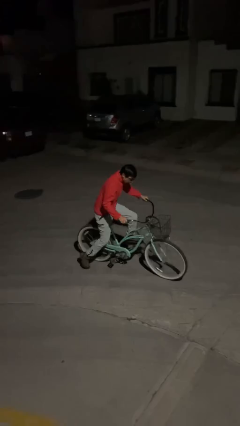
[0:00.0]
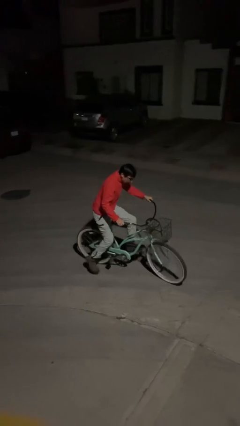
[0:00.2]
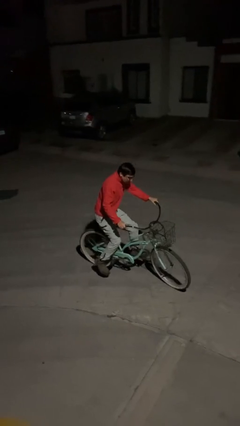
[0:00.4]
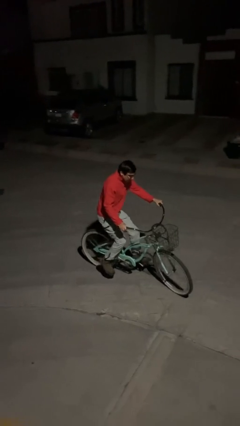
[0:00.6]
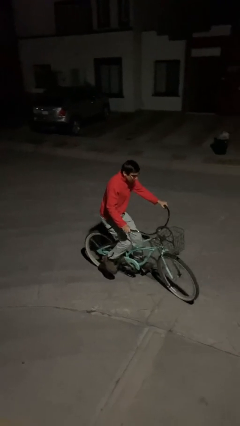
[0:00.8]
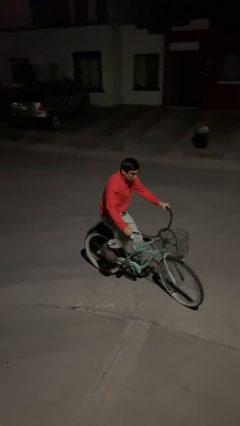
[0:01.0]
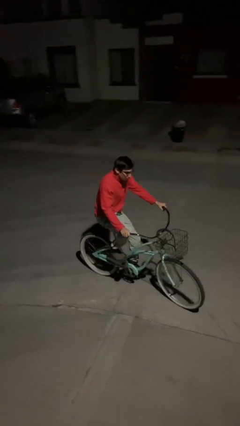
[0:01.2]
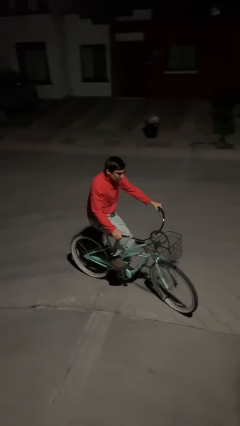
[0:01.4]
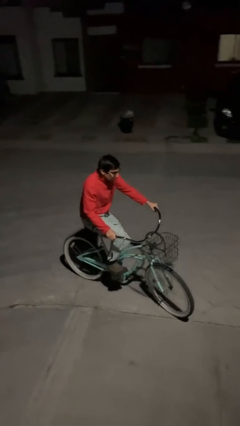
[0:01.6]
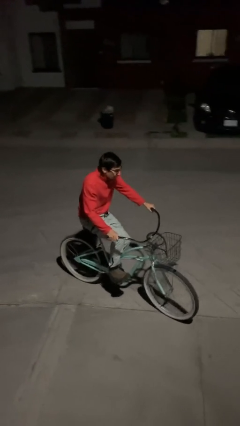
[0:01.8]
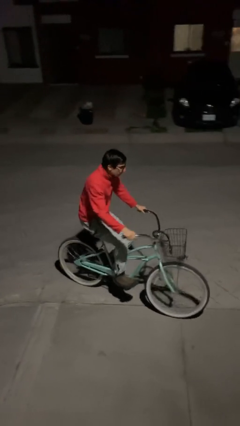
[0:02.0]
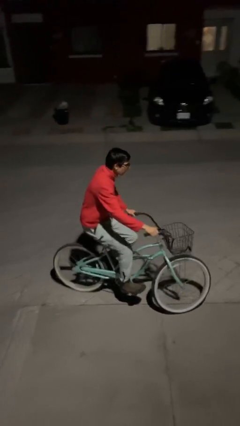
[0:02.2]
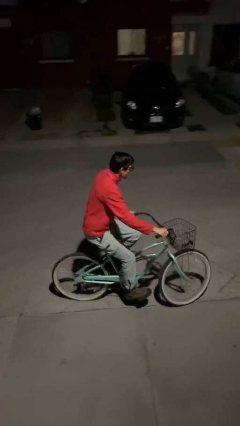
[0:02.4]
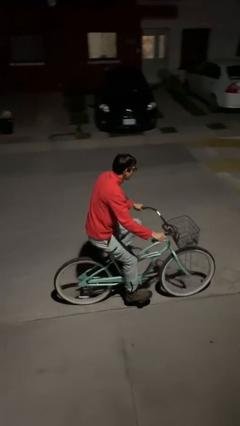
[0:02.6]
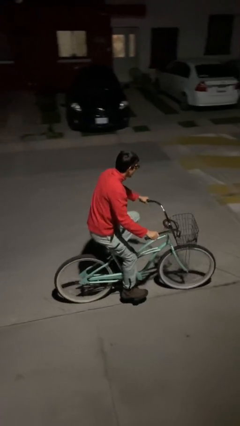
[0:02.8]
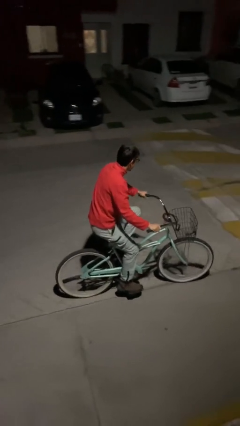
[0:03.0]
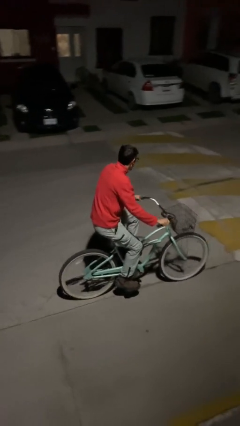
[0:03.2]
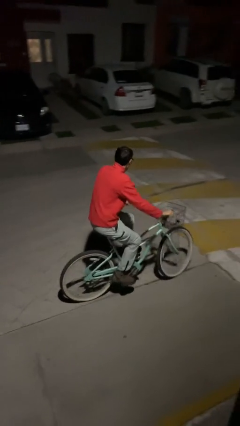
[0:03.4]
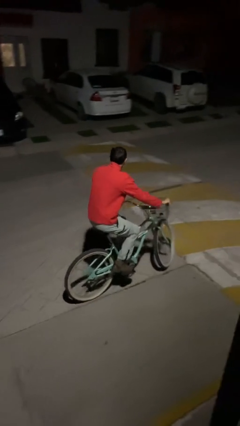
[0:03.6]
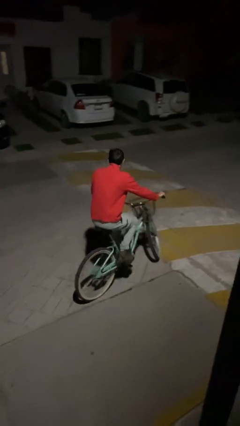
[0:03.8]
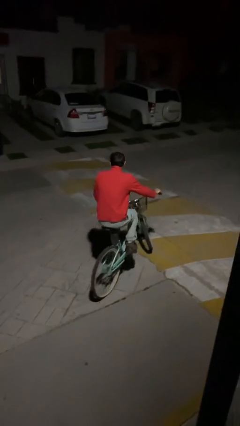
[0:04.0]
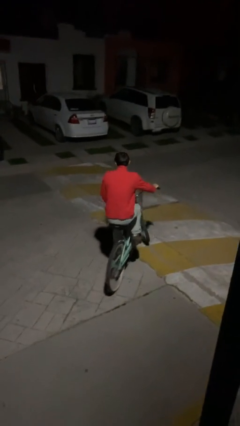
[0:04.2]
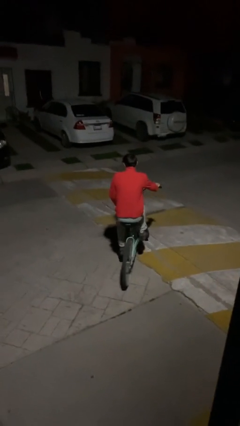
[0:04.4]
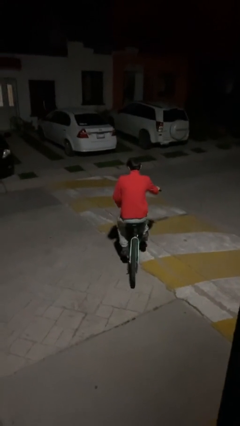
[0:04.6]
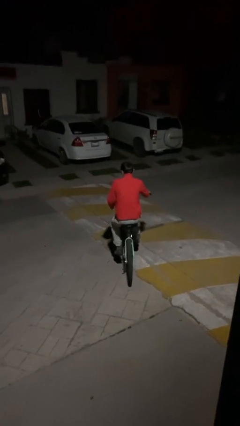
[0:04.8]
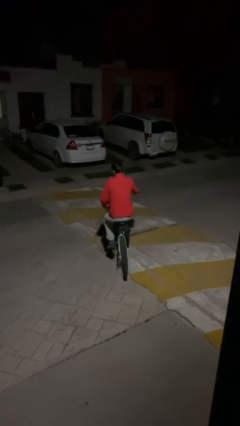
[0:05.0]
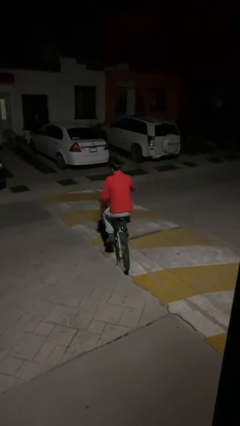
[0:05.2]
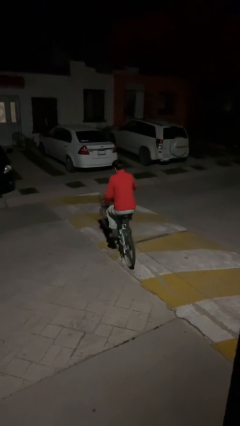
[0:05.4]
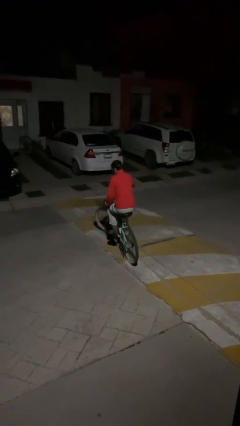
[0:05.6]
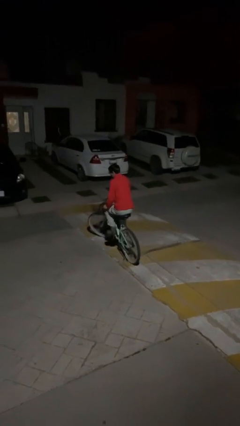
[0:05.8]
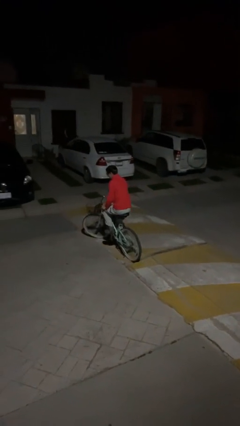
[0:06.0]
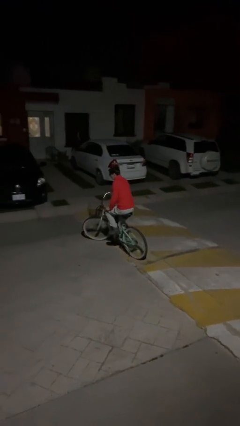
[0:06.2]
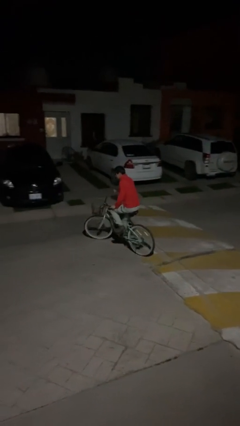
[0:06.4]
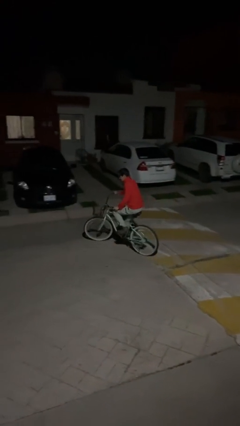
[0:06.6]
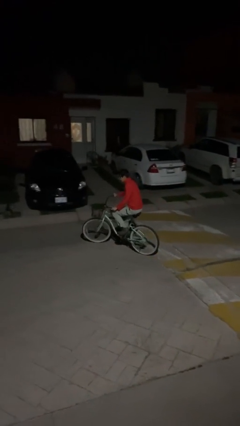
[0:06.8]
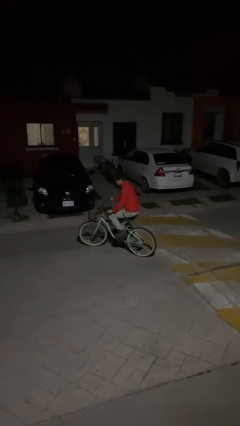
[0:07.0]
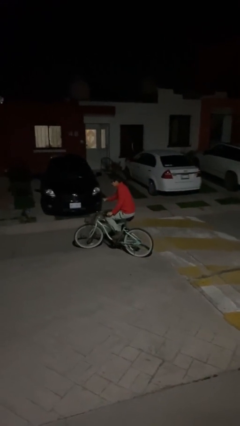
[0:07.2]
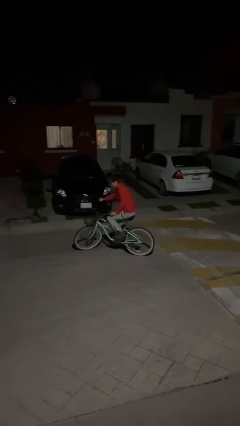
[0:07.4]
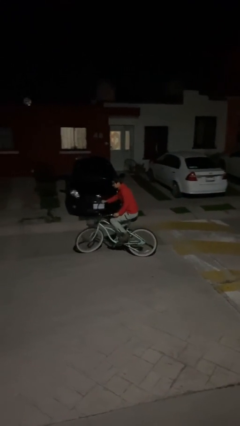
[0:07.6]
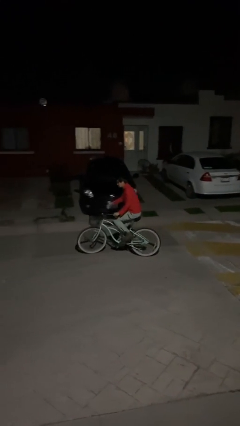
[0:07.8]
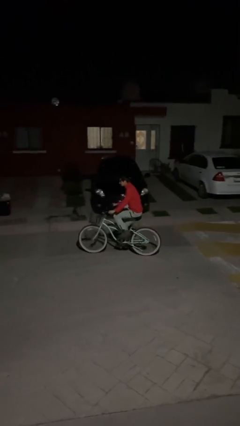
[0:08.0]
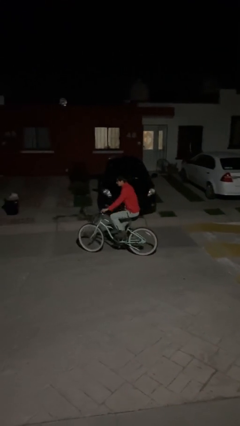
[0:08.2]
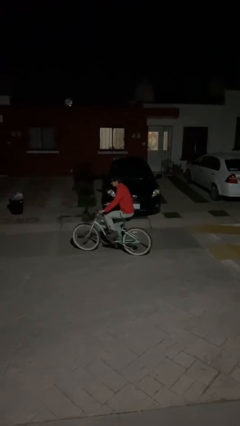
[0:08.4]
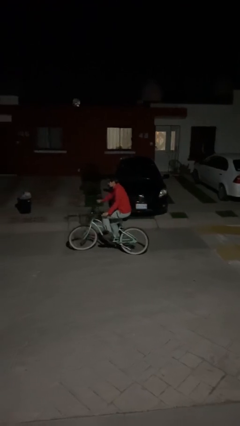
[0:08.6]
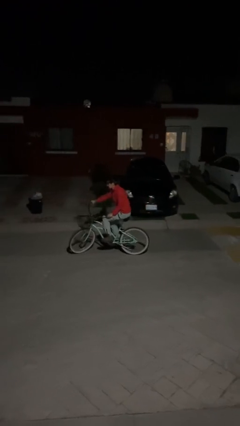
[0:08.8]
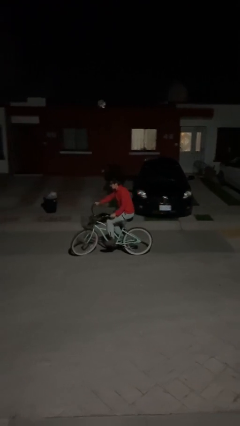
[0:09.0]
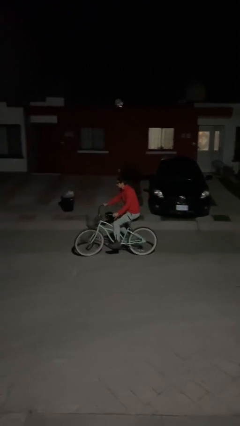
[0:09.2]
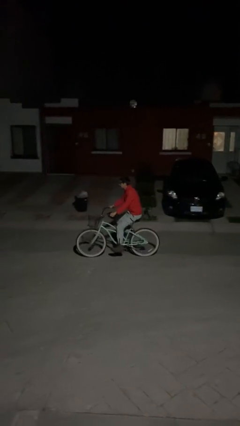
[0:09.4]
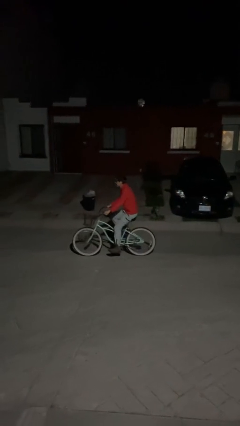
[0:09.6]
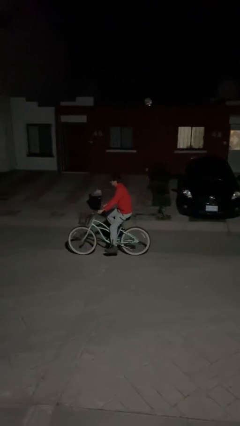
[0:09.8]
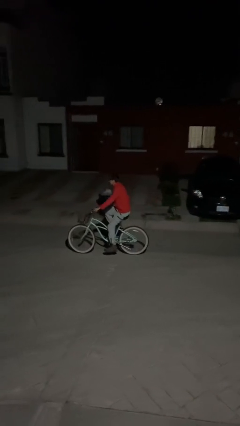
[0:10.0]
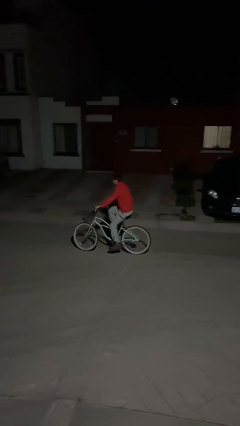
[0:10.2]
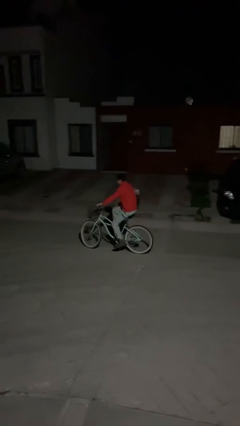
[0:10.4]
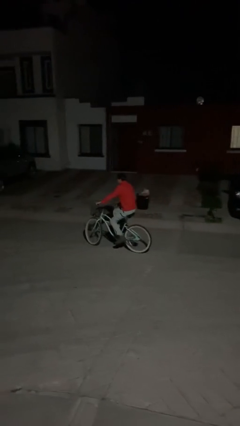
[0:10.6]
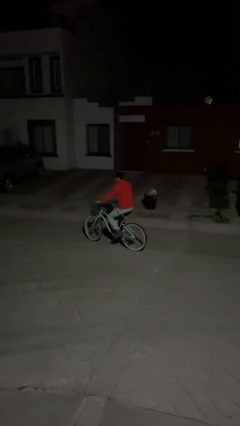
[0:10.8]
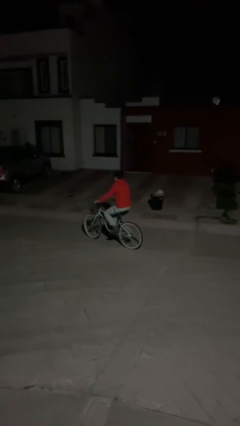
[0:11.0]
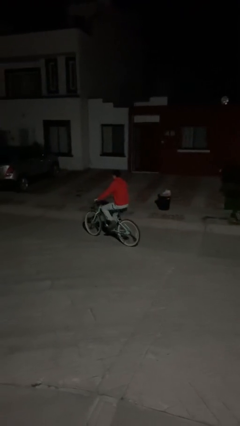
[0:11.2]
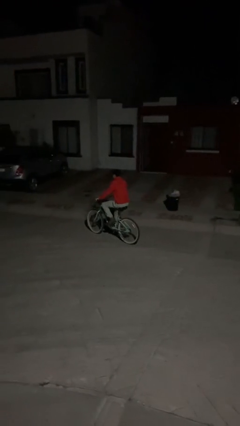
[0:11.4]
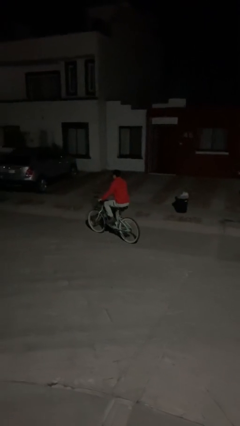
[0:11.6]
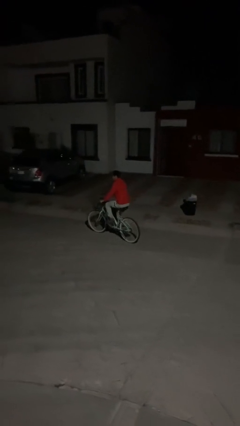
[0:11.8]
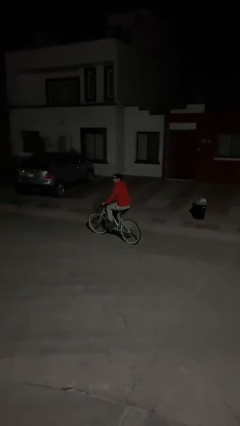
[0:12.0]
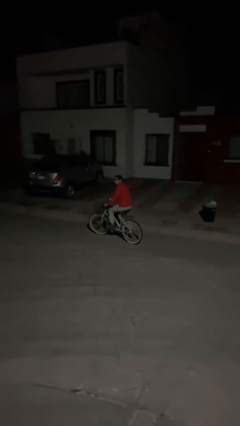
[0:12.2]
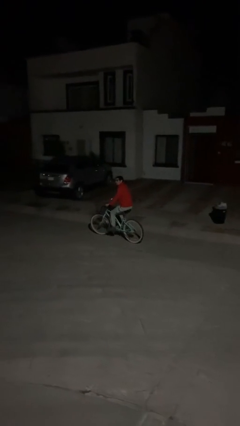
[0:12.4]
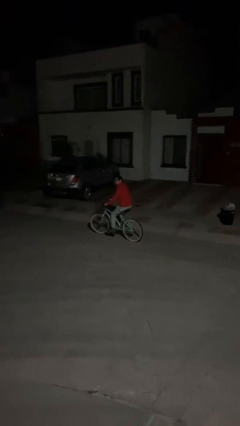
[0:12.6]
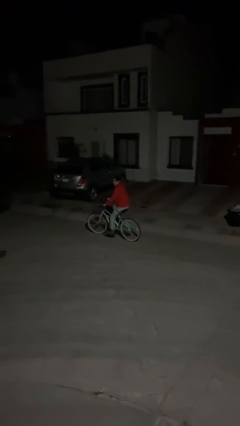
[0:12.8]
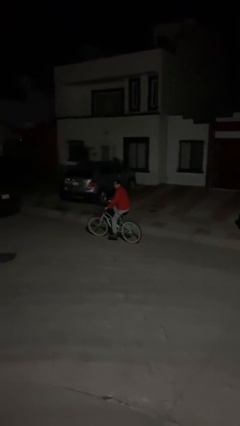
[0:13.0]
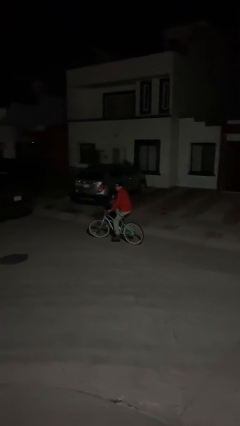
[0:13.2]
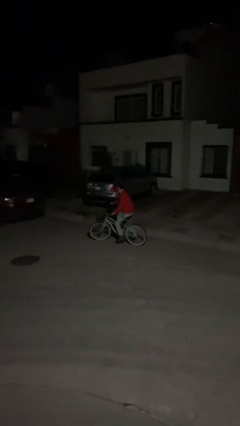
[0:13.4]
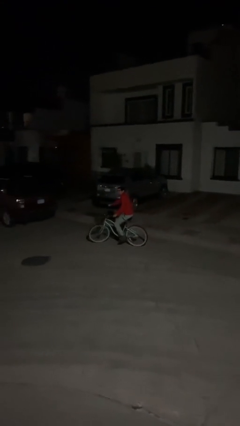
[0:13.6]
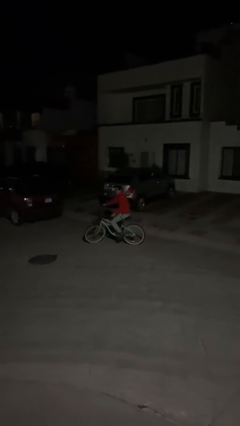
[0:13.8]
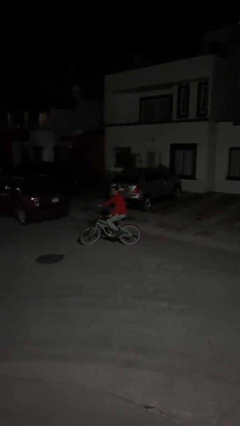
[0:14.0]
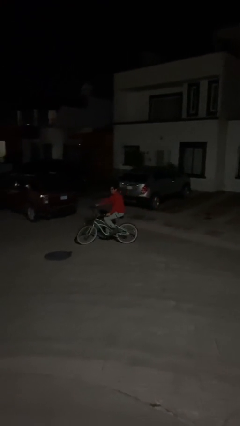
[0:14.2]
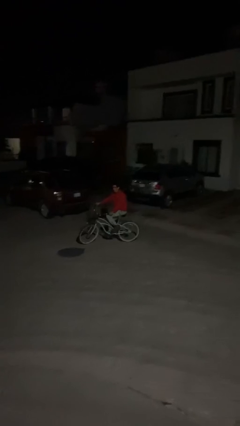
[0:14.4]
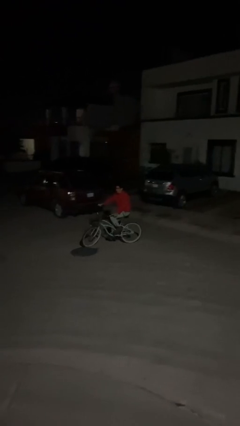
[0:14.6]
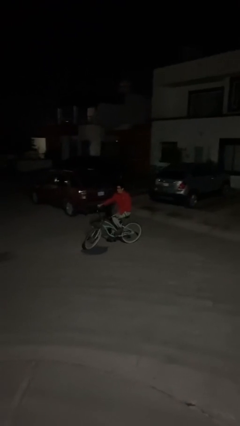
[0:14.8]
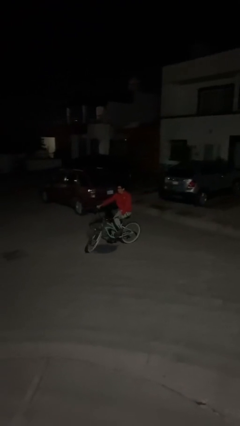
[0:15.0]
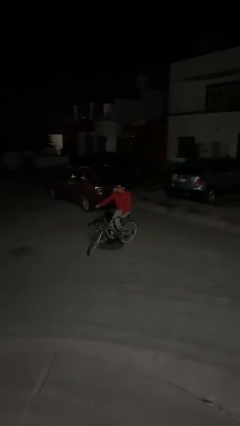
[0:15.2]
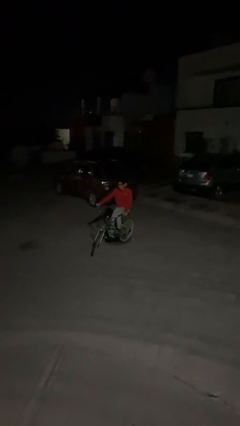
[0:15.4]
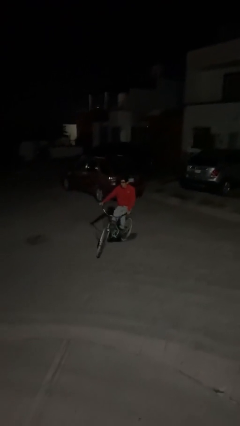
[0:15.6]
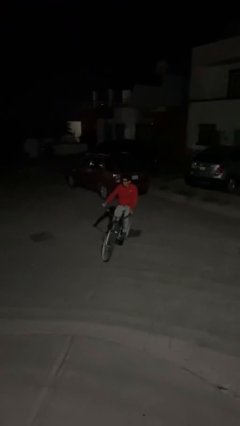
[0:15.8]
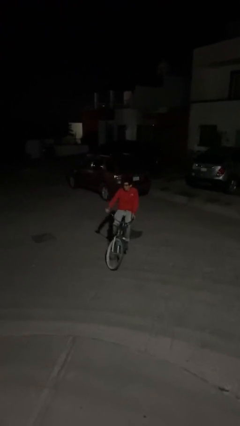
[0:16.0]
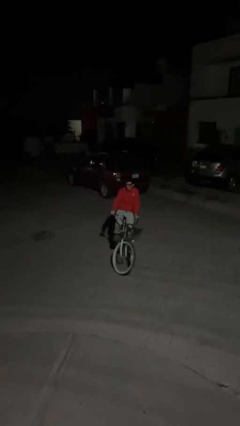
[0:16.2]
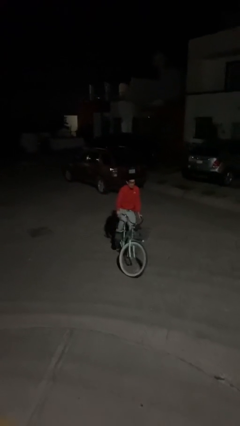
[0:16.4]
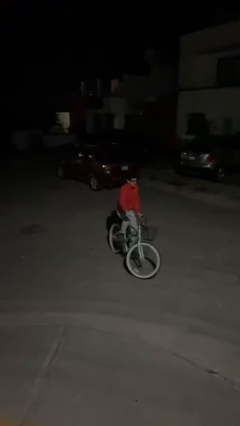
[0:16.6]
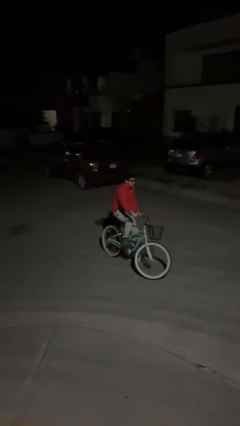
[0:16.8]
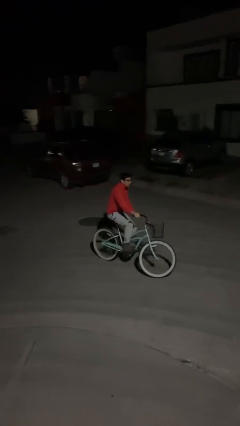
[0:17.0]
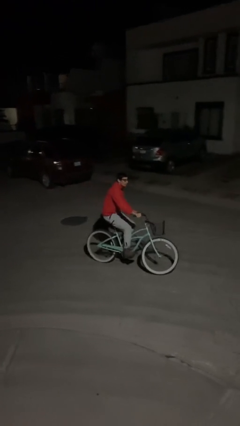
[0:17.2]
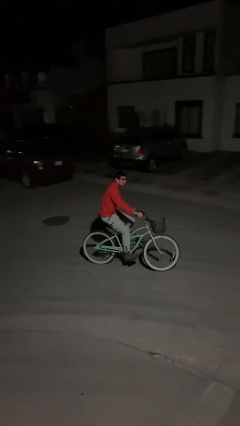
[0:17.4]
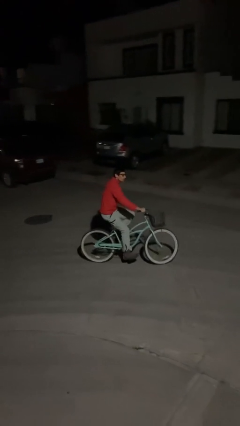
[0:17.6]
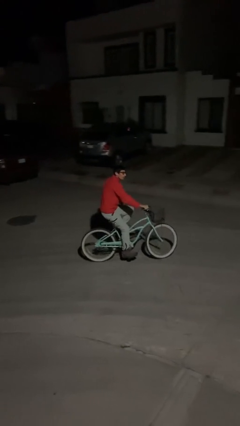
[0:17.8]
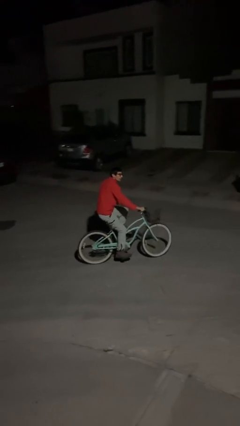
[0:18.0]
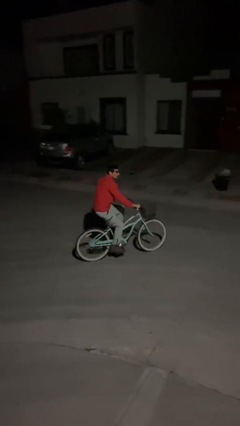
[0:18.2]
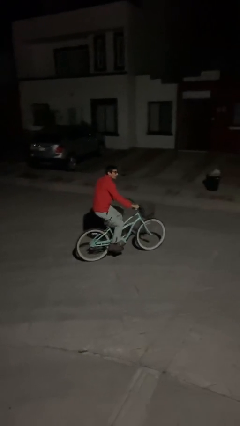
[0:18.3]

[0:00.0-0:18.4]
person rides bicycle

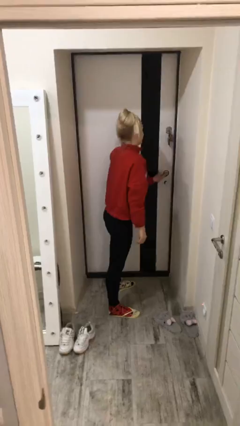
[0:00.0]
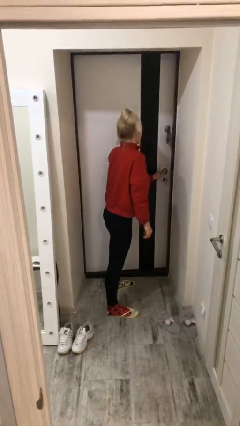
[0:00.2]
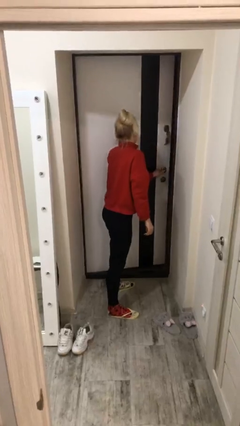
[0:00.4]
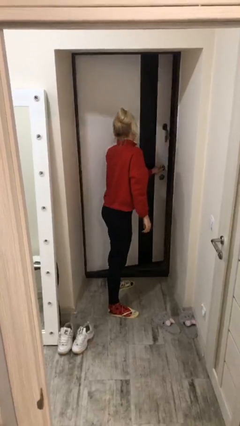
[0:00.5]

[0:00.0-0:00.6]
person opens facility door
